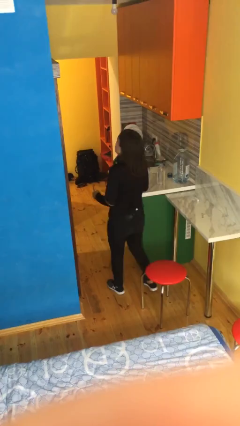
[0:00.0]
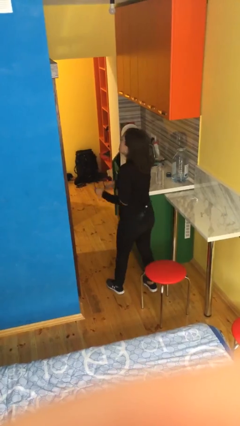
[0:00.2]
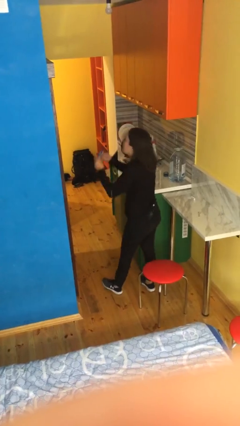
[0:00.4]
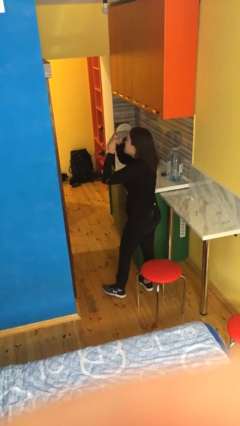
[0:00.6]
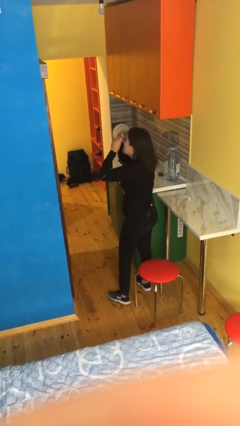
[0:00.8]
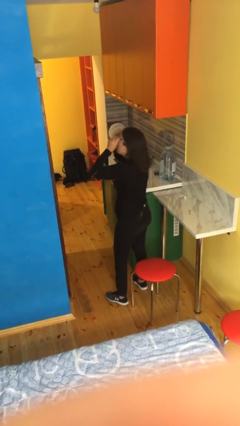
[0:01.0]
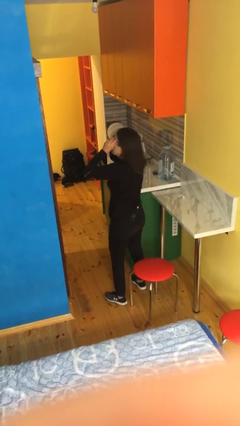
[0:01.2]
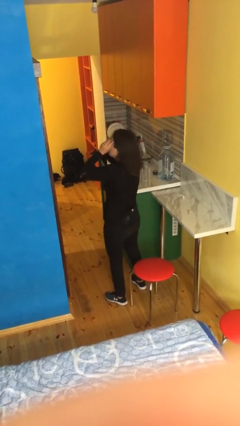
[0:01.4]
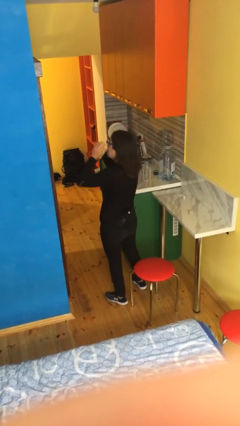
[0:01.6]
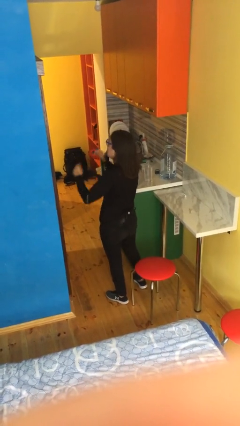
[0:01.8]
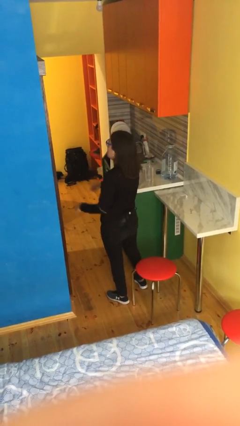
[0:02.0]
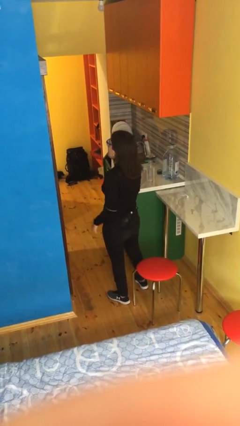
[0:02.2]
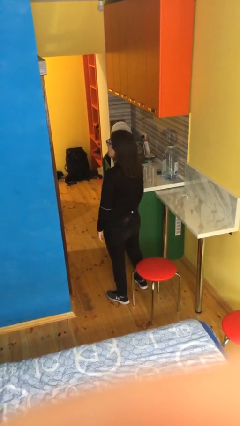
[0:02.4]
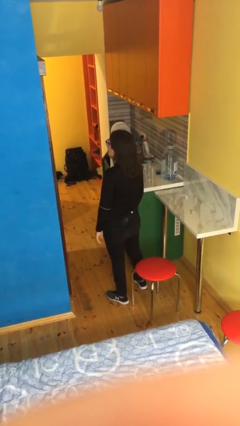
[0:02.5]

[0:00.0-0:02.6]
person puts on glasses

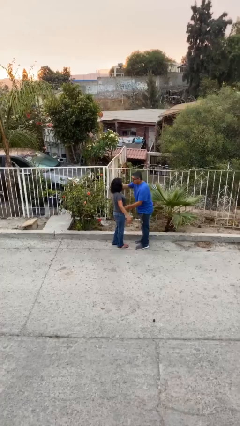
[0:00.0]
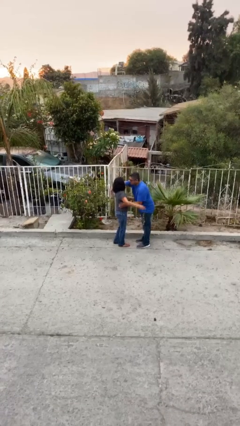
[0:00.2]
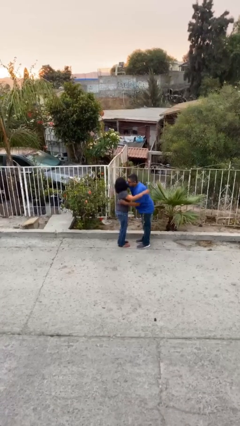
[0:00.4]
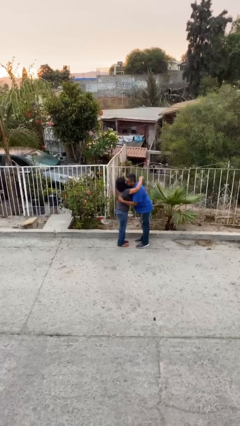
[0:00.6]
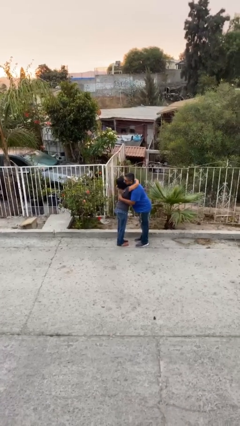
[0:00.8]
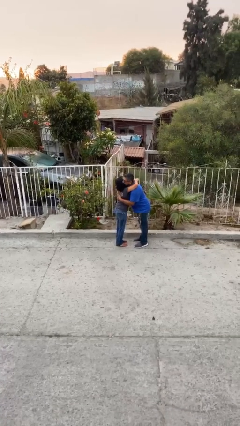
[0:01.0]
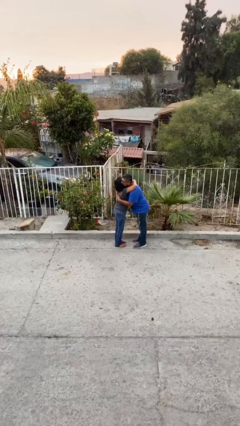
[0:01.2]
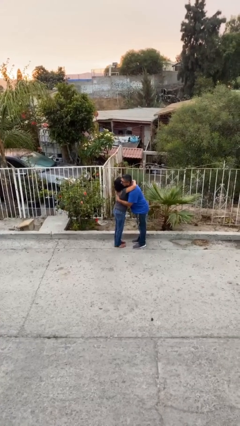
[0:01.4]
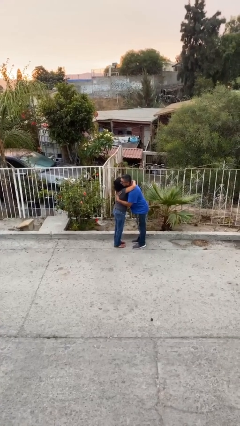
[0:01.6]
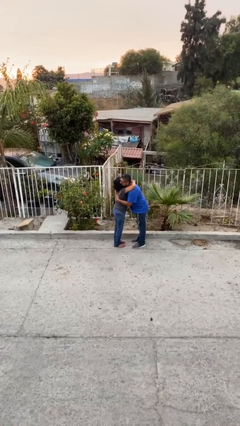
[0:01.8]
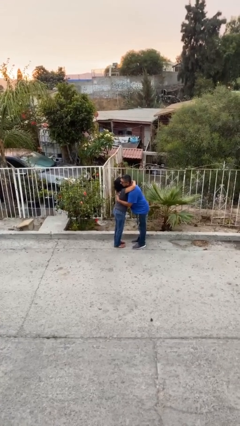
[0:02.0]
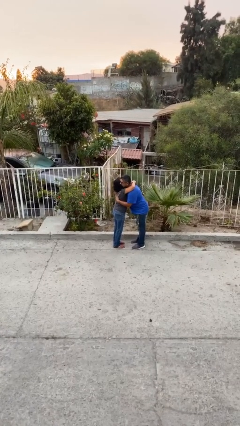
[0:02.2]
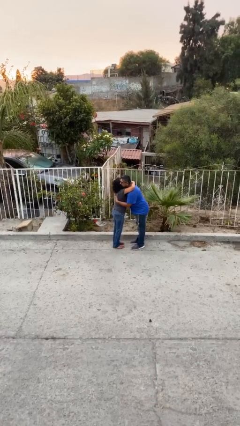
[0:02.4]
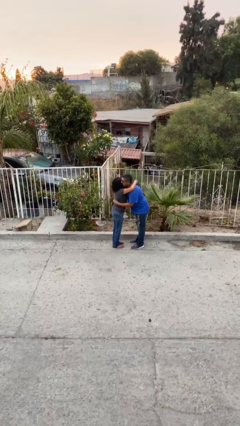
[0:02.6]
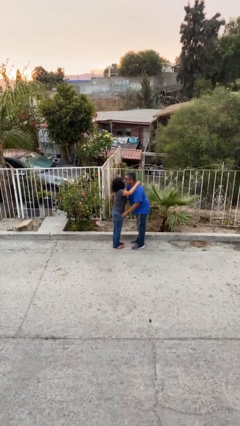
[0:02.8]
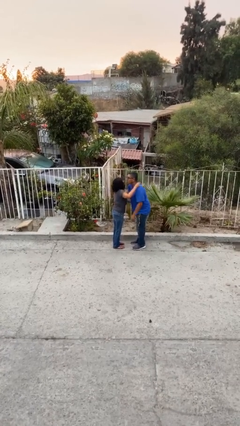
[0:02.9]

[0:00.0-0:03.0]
person embraces person

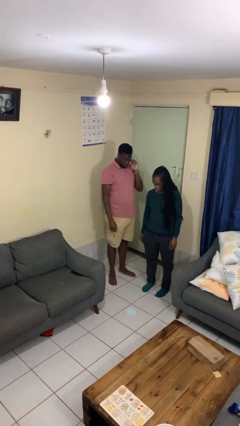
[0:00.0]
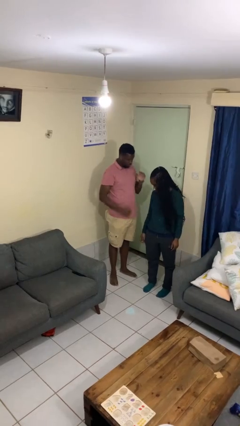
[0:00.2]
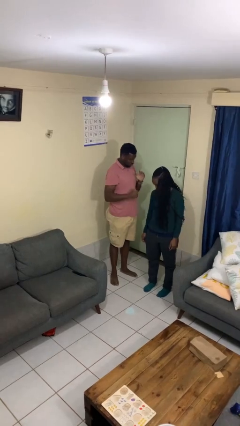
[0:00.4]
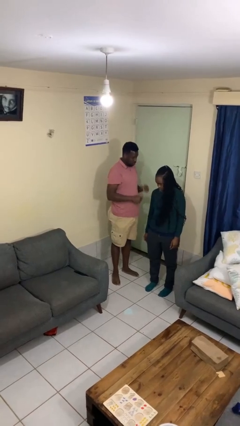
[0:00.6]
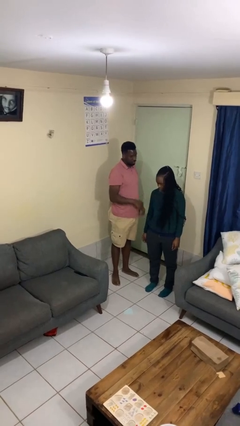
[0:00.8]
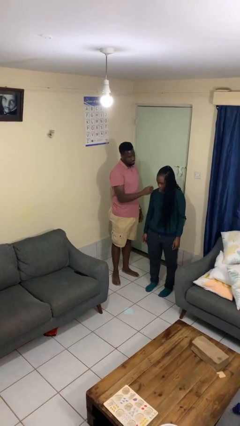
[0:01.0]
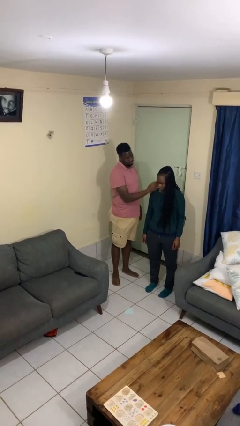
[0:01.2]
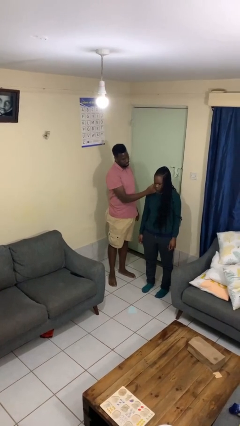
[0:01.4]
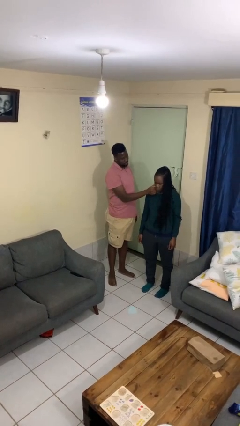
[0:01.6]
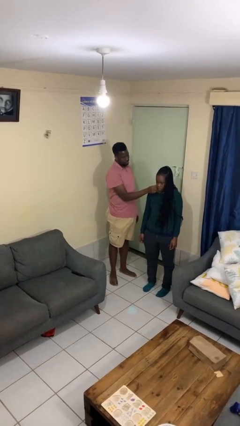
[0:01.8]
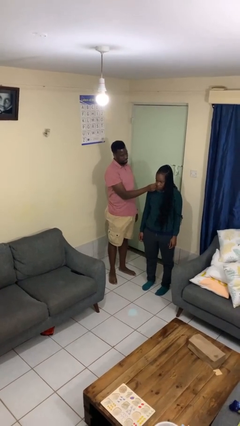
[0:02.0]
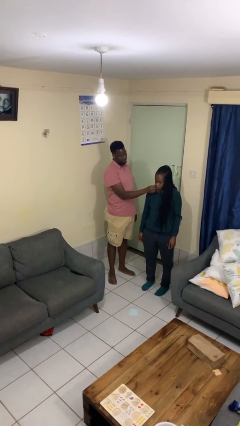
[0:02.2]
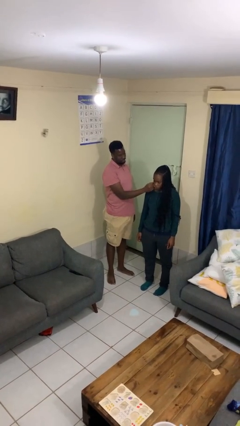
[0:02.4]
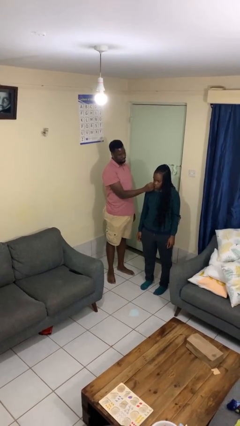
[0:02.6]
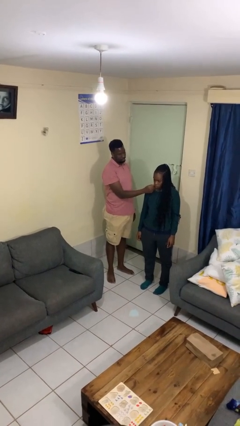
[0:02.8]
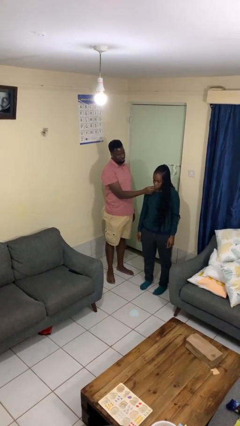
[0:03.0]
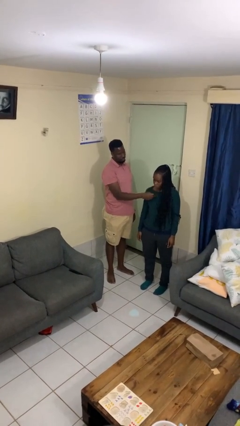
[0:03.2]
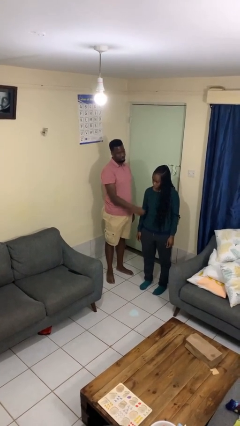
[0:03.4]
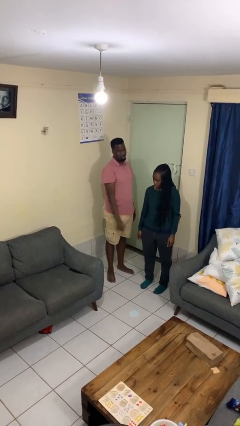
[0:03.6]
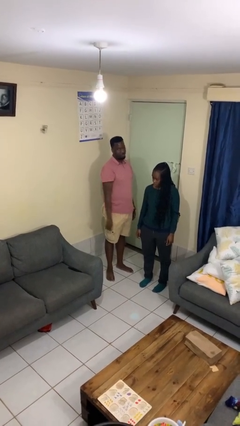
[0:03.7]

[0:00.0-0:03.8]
person touches face of person

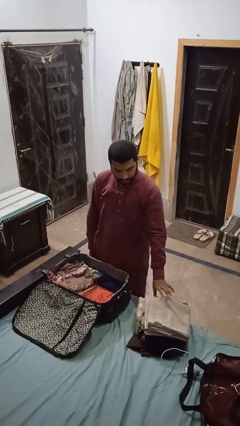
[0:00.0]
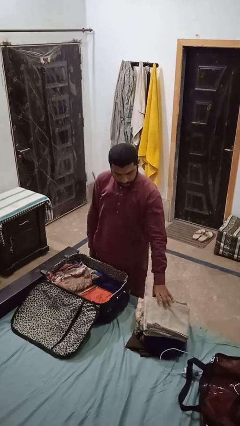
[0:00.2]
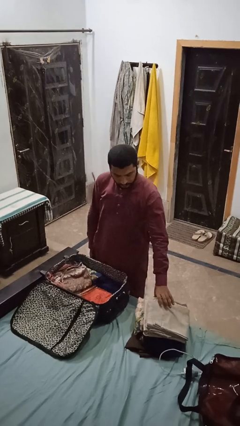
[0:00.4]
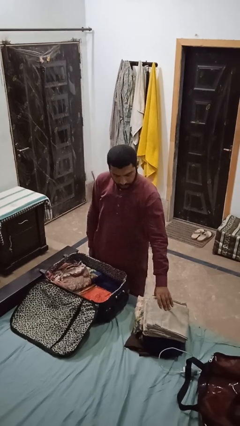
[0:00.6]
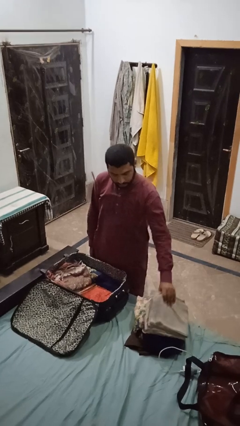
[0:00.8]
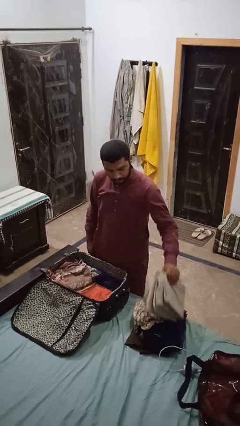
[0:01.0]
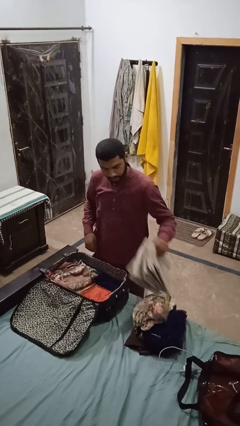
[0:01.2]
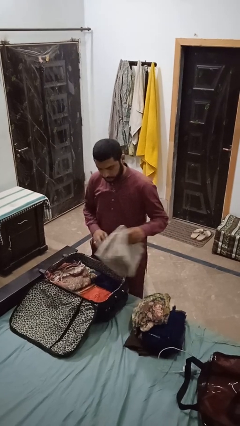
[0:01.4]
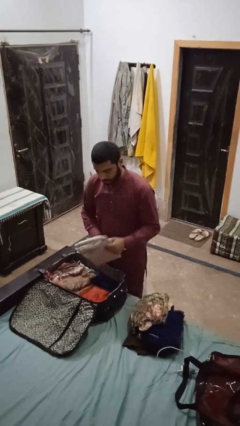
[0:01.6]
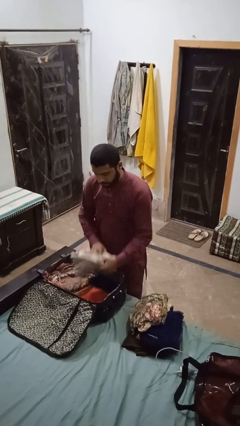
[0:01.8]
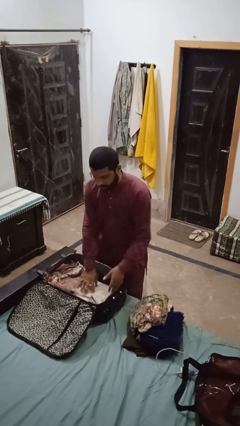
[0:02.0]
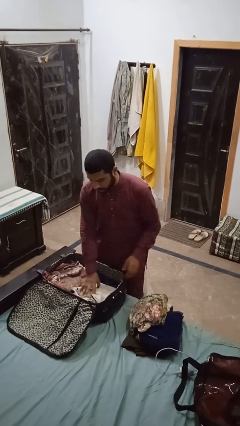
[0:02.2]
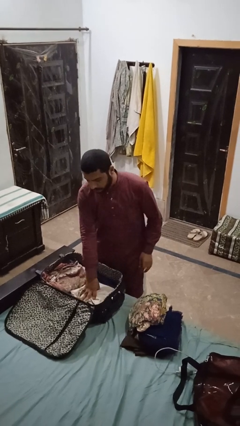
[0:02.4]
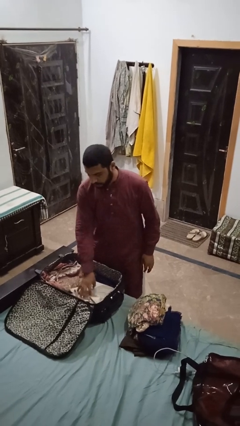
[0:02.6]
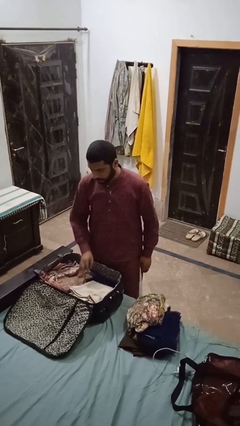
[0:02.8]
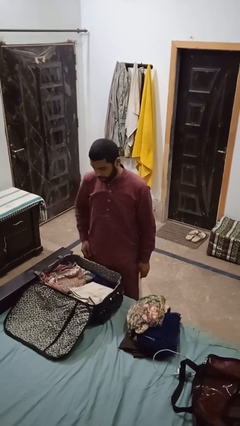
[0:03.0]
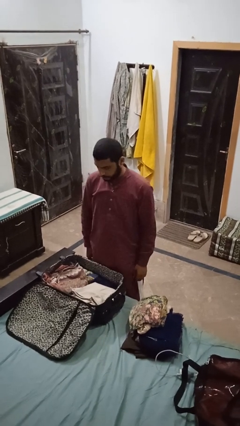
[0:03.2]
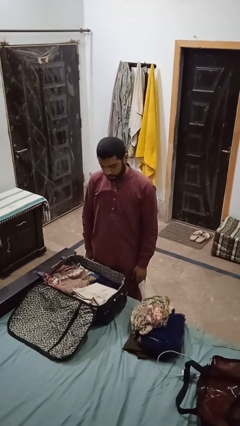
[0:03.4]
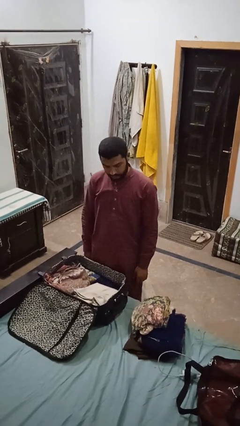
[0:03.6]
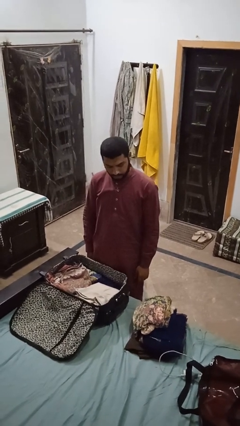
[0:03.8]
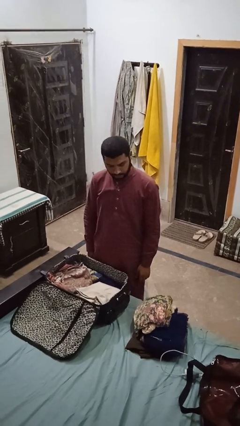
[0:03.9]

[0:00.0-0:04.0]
person loads clothes into suitcase

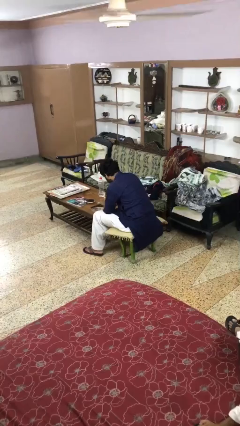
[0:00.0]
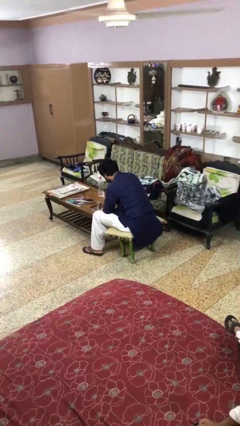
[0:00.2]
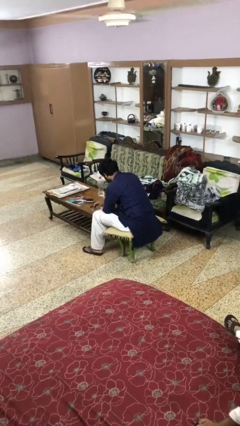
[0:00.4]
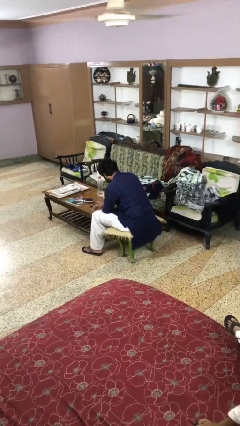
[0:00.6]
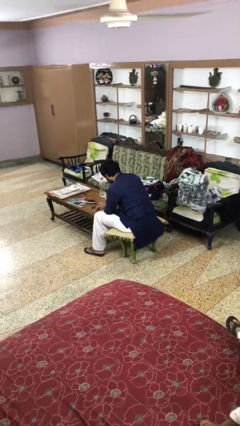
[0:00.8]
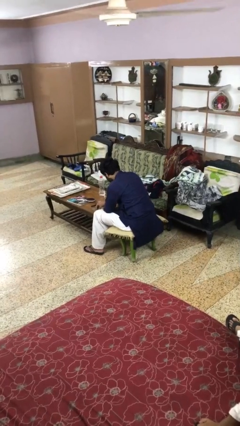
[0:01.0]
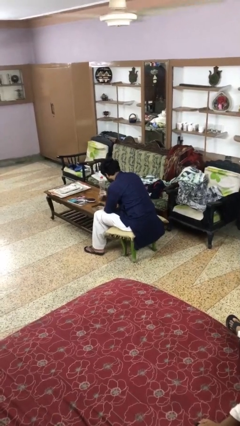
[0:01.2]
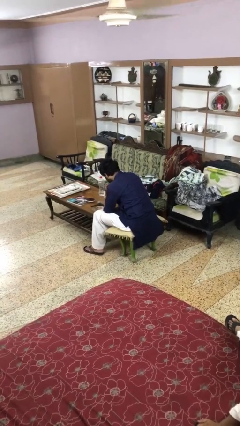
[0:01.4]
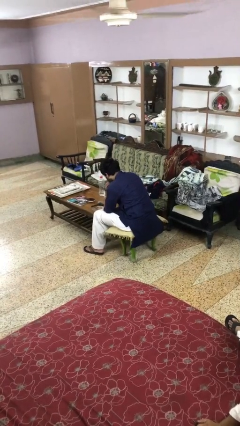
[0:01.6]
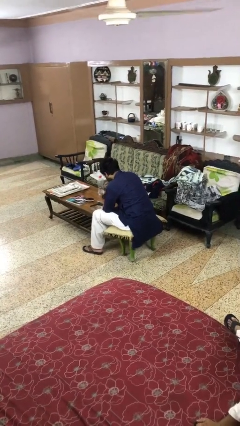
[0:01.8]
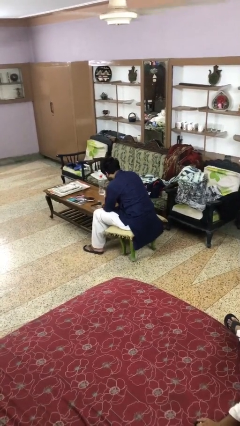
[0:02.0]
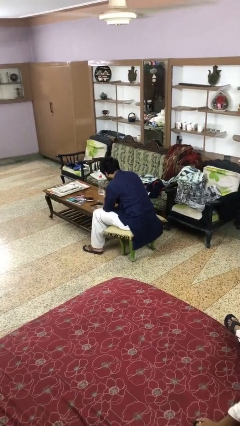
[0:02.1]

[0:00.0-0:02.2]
person eats with hands

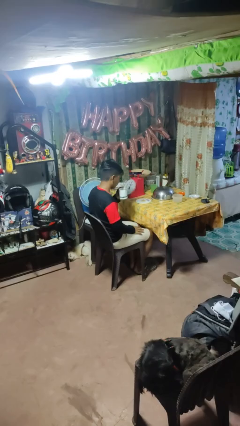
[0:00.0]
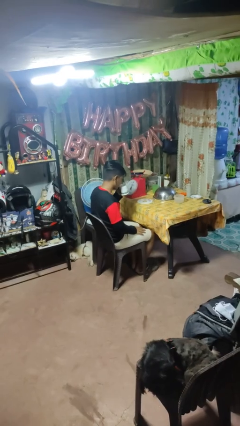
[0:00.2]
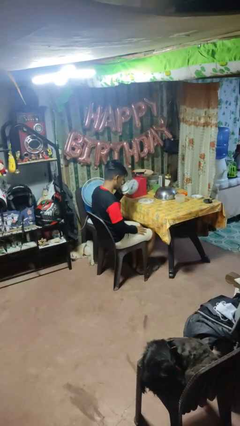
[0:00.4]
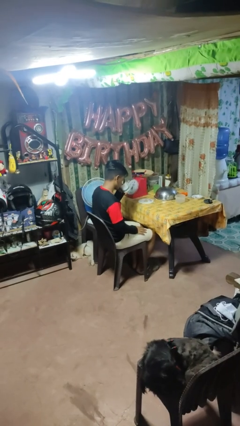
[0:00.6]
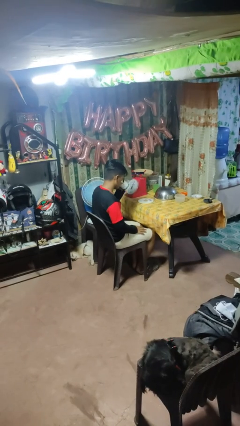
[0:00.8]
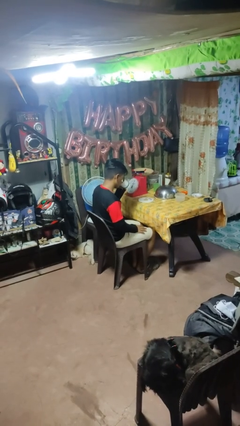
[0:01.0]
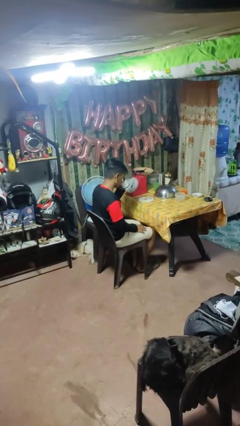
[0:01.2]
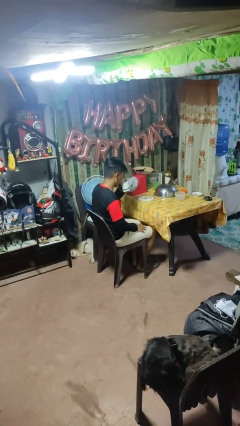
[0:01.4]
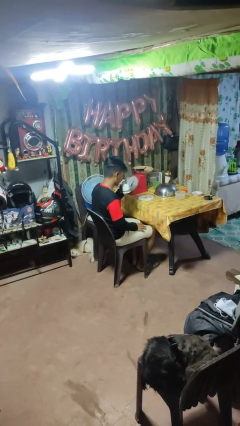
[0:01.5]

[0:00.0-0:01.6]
person drinks from mug
